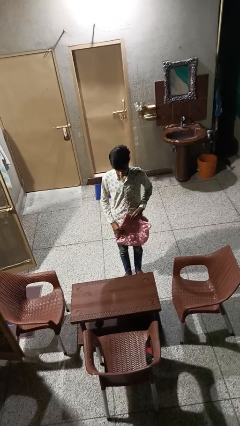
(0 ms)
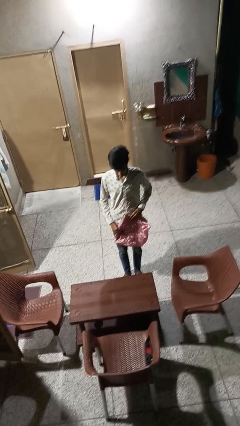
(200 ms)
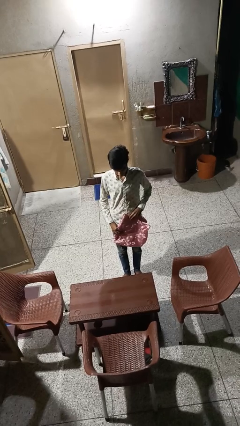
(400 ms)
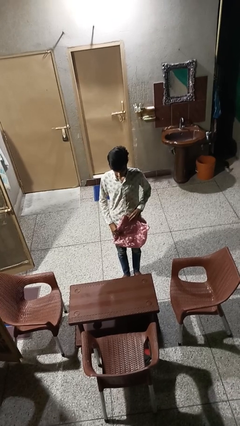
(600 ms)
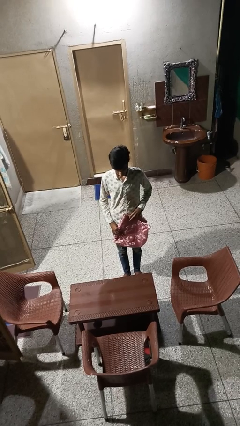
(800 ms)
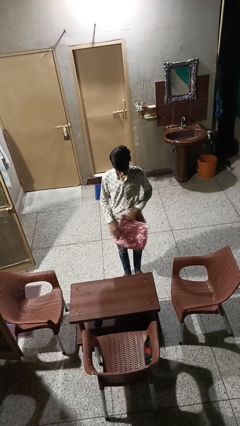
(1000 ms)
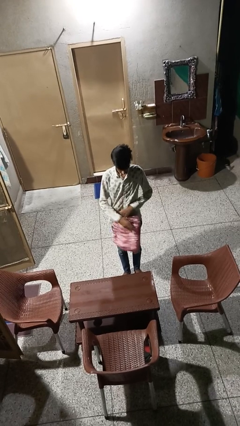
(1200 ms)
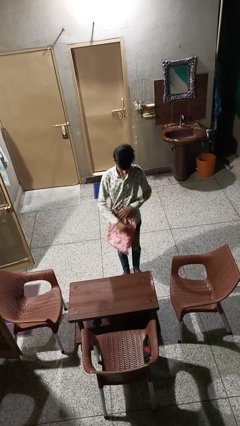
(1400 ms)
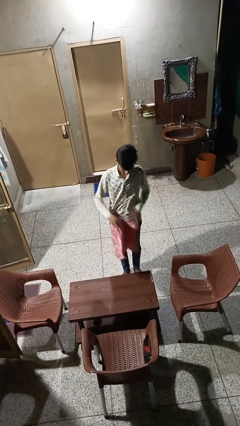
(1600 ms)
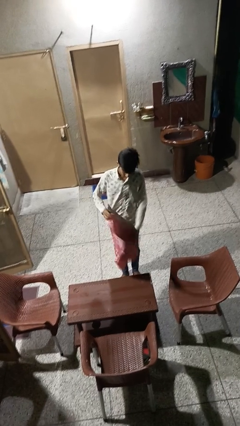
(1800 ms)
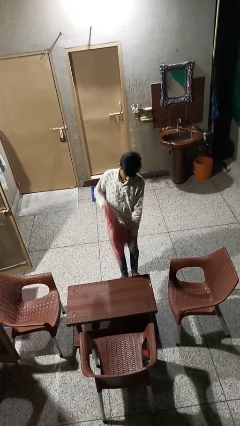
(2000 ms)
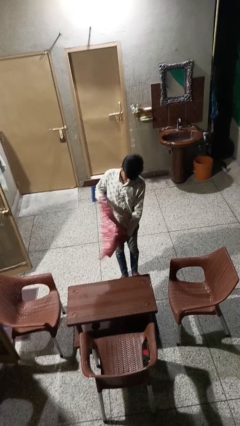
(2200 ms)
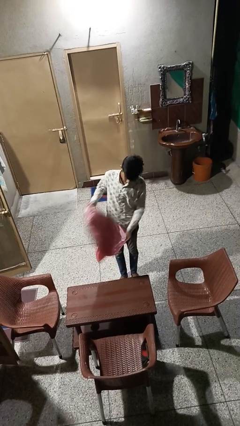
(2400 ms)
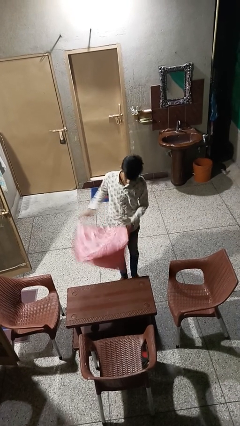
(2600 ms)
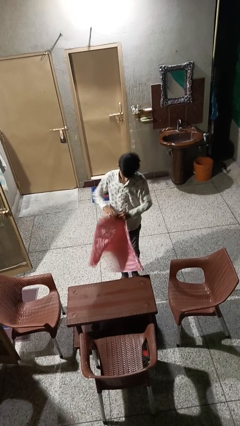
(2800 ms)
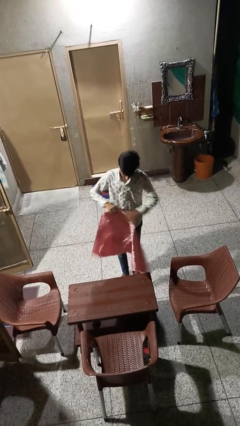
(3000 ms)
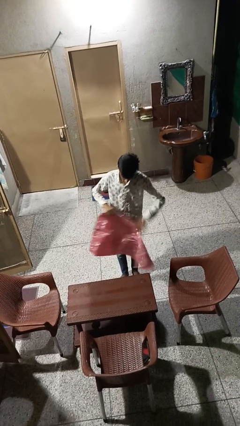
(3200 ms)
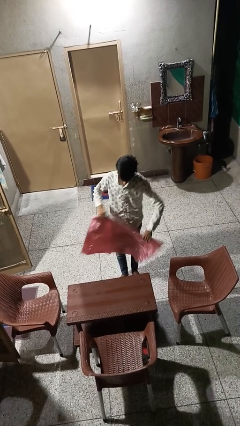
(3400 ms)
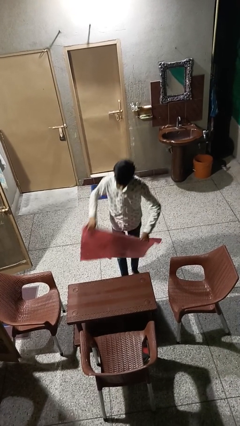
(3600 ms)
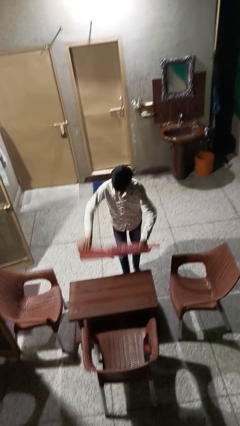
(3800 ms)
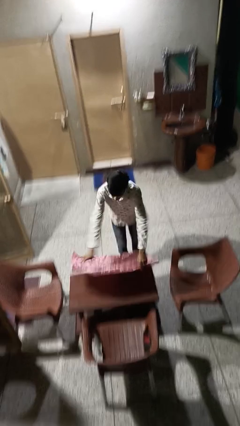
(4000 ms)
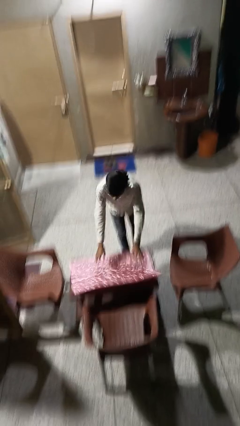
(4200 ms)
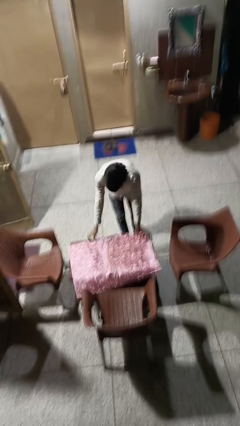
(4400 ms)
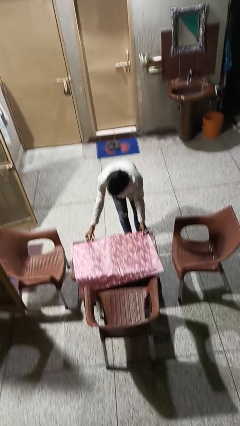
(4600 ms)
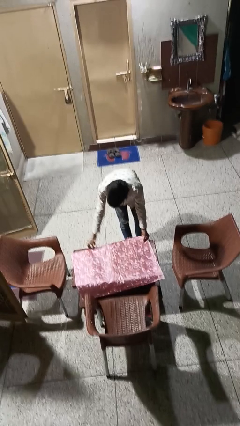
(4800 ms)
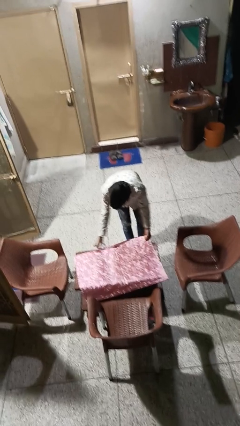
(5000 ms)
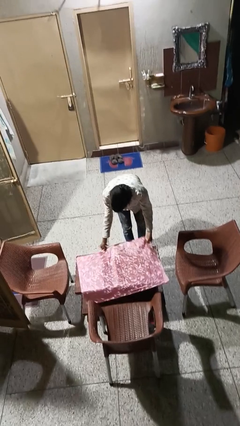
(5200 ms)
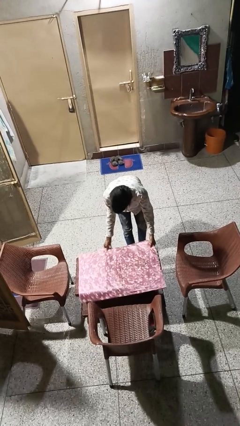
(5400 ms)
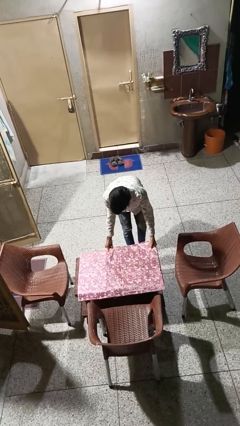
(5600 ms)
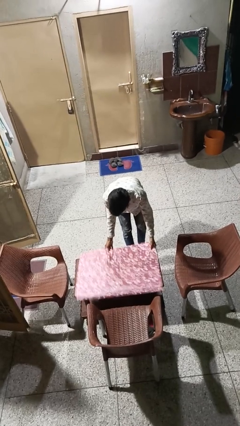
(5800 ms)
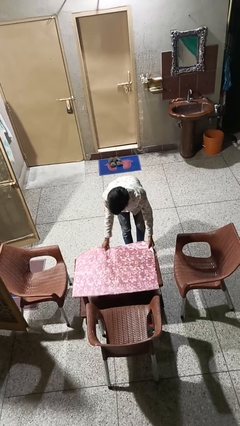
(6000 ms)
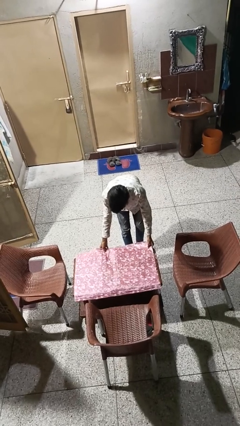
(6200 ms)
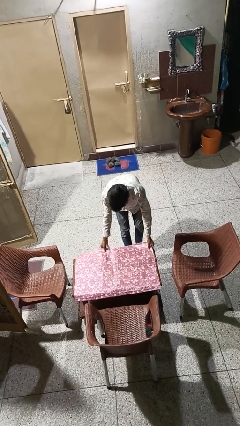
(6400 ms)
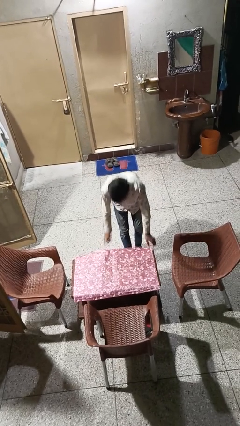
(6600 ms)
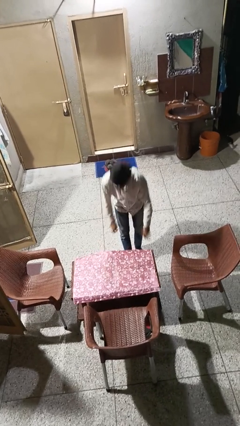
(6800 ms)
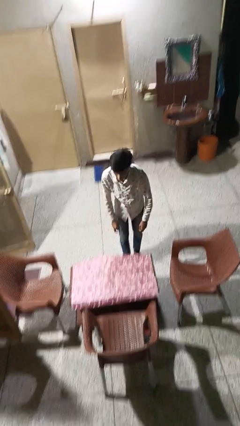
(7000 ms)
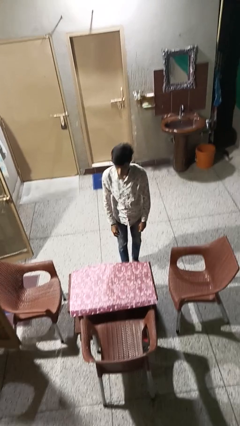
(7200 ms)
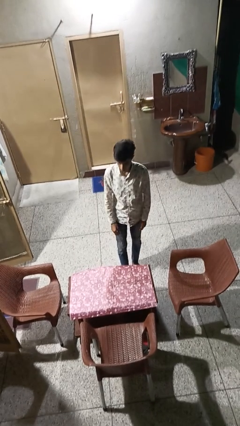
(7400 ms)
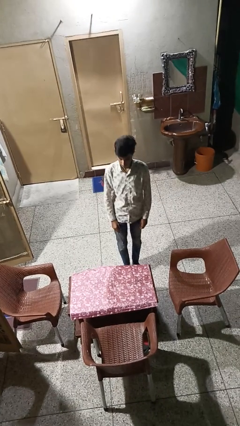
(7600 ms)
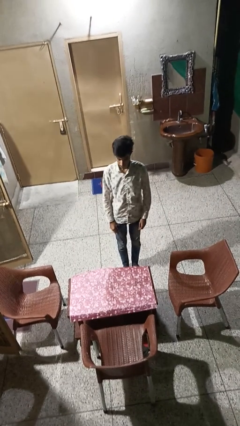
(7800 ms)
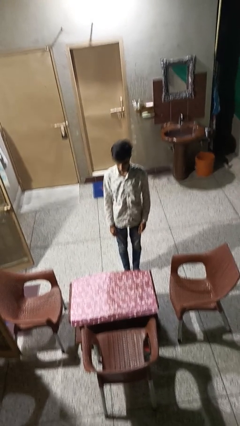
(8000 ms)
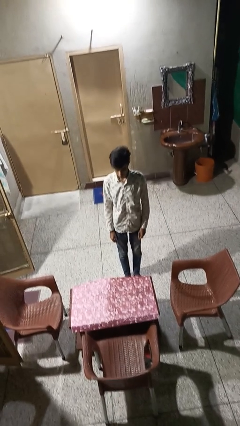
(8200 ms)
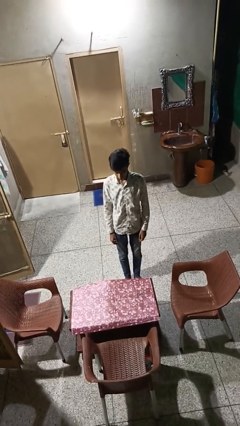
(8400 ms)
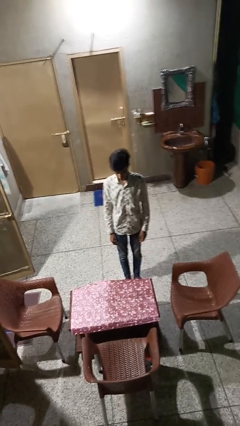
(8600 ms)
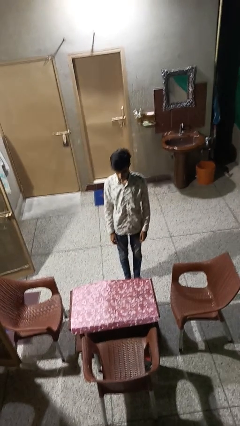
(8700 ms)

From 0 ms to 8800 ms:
person spreads tablecloth

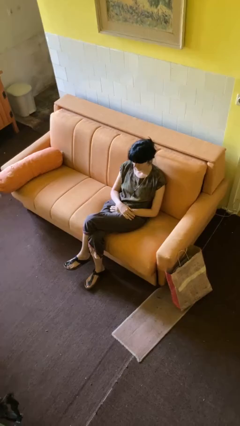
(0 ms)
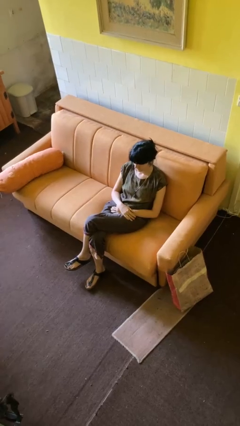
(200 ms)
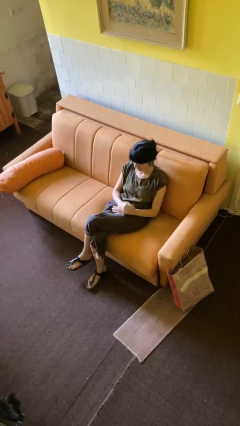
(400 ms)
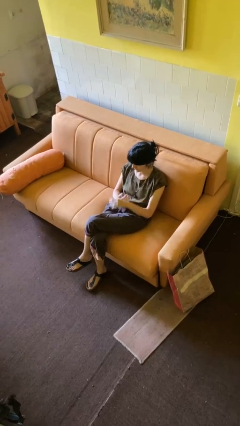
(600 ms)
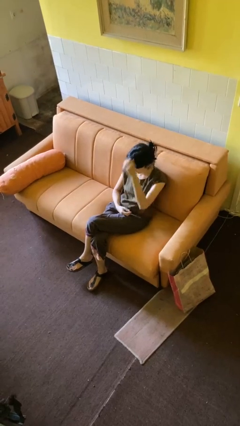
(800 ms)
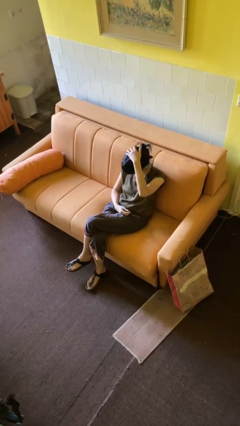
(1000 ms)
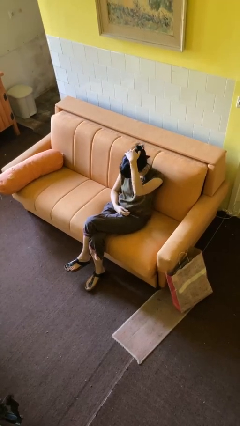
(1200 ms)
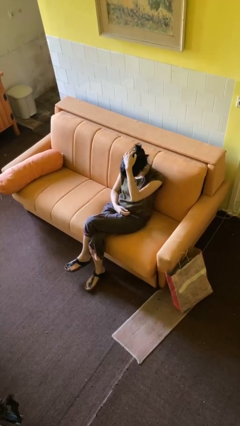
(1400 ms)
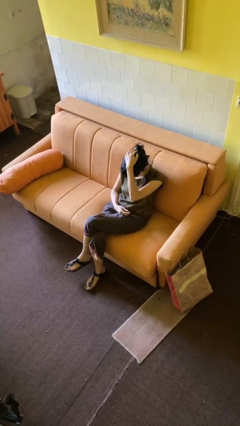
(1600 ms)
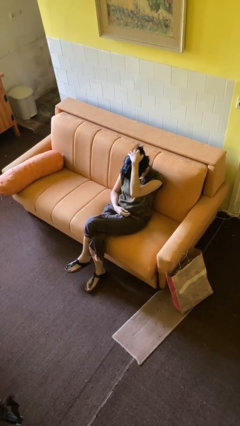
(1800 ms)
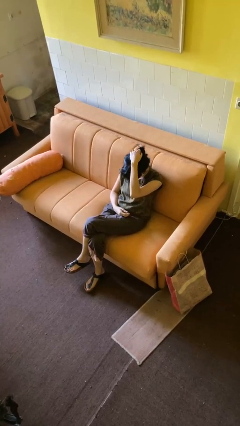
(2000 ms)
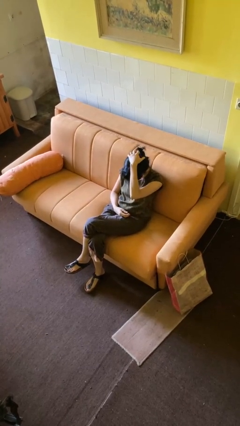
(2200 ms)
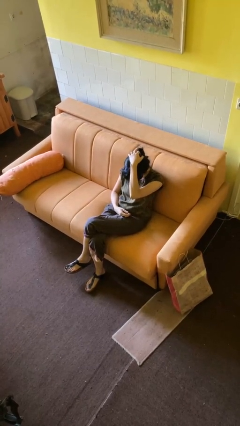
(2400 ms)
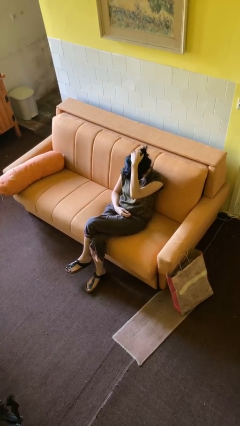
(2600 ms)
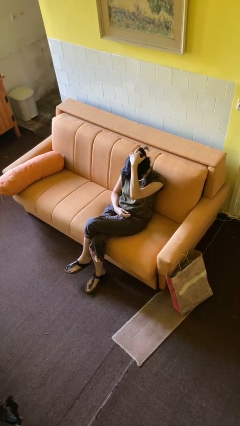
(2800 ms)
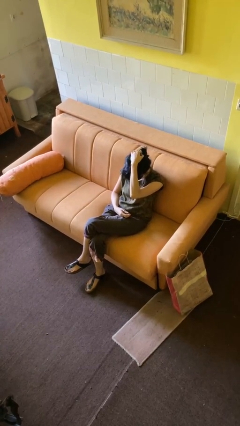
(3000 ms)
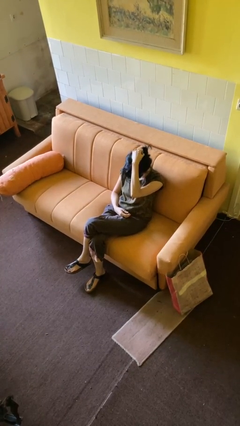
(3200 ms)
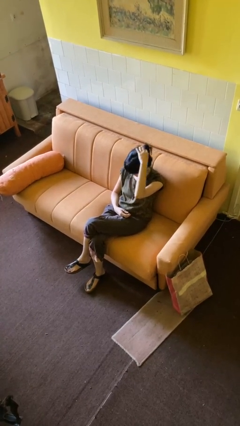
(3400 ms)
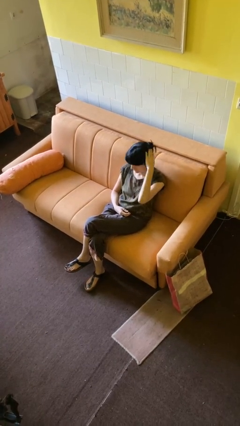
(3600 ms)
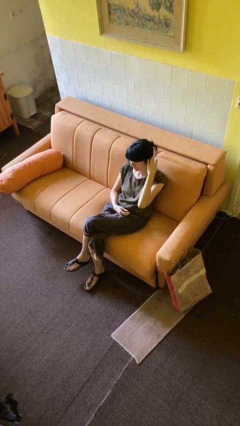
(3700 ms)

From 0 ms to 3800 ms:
person scratches face

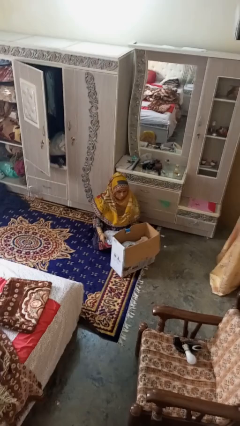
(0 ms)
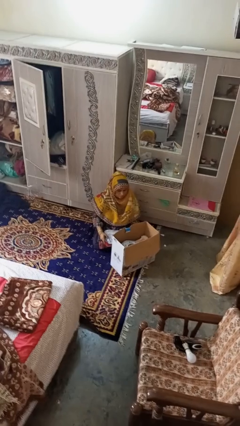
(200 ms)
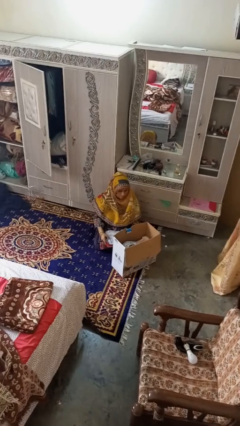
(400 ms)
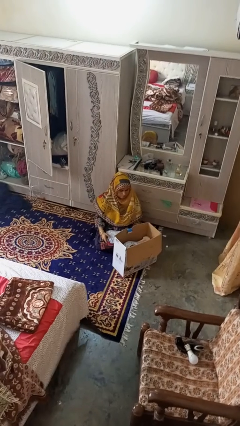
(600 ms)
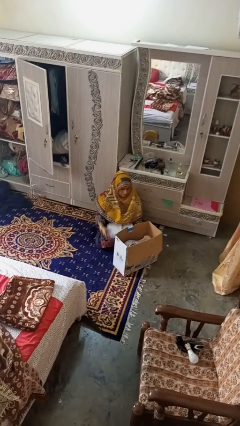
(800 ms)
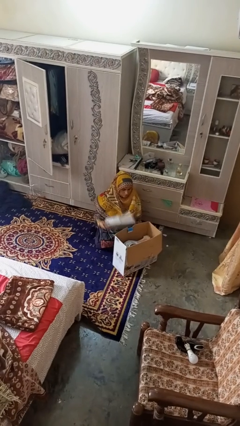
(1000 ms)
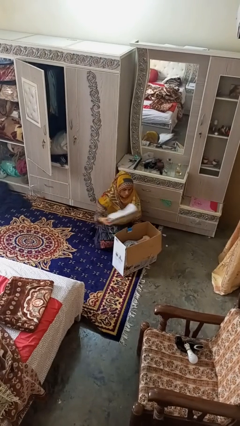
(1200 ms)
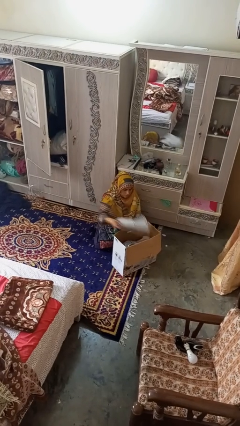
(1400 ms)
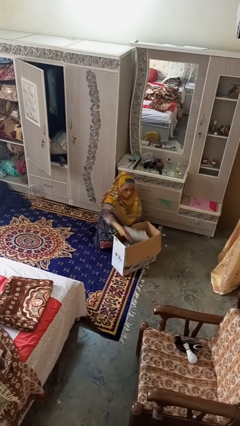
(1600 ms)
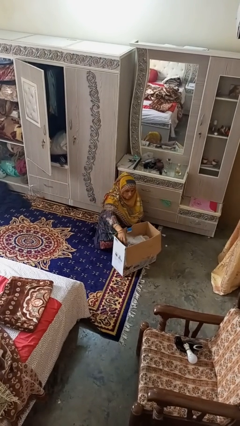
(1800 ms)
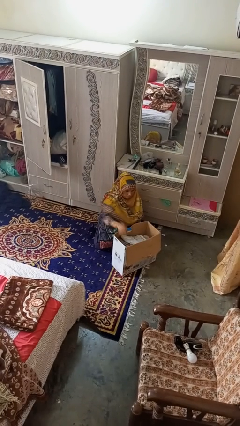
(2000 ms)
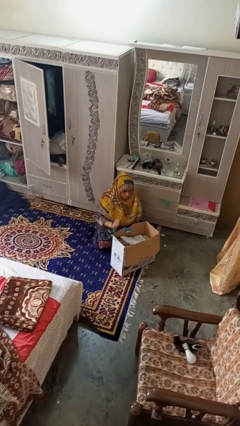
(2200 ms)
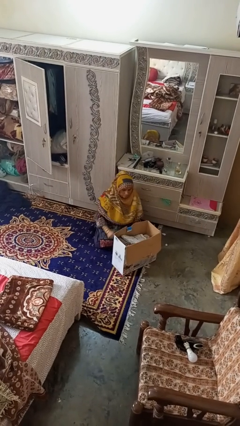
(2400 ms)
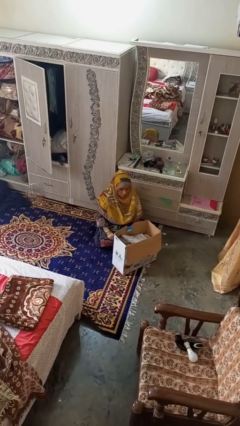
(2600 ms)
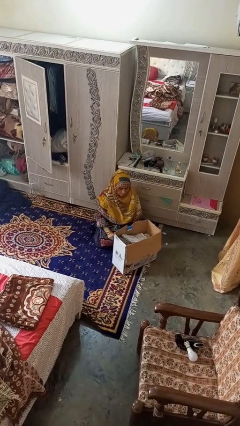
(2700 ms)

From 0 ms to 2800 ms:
person puts object into box

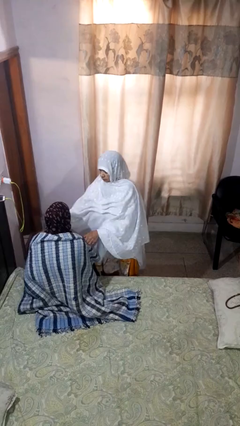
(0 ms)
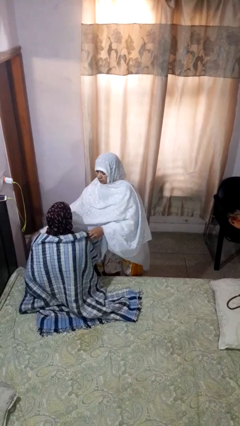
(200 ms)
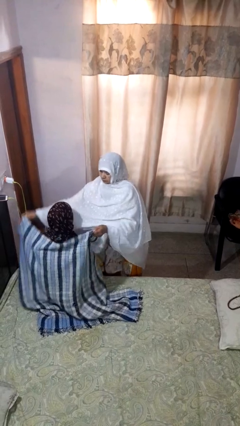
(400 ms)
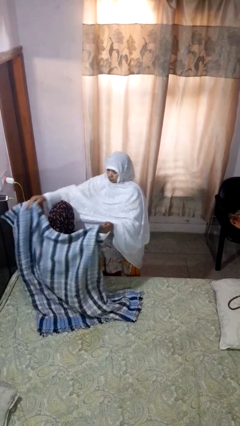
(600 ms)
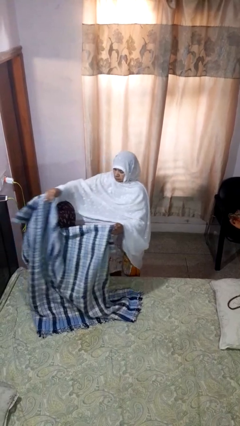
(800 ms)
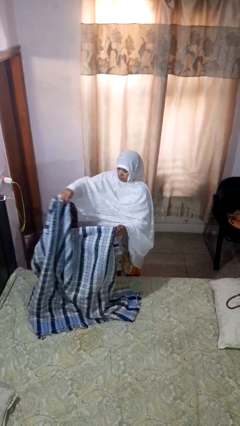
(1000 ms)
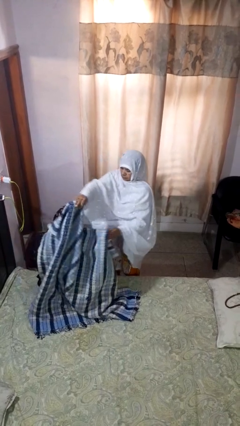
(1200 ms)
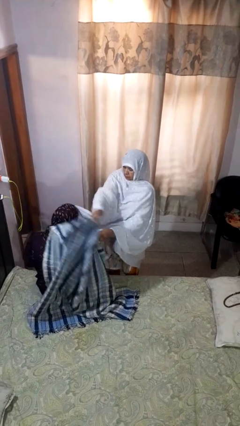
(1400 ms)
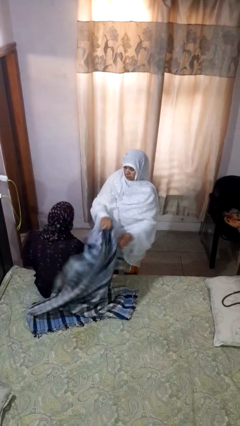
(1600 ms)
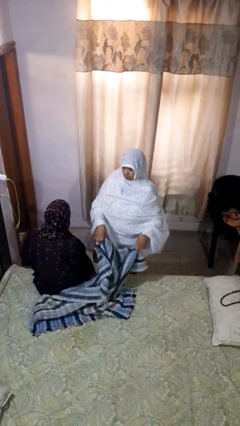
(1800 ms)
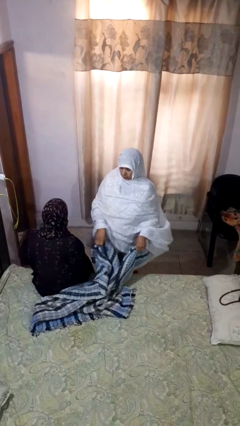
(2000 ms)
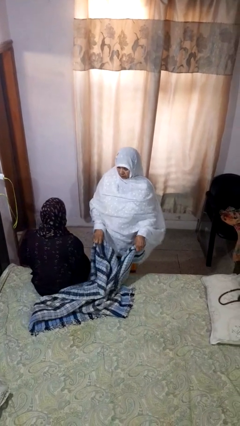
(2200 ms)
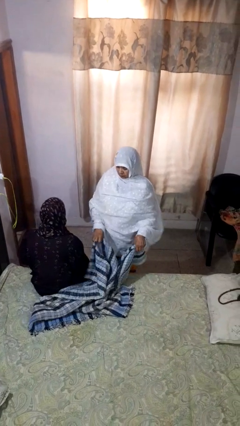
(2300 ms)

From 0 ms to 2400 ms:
person uncovers friend with blanket
